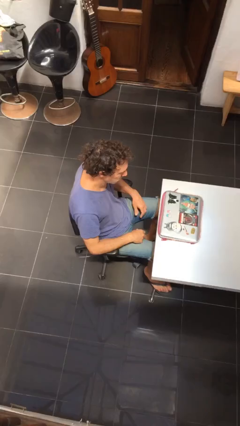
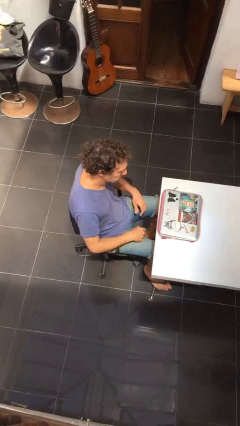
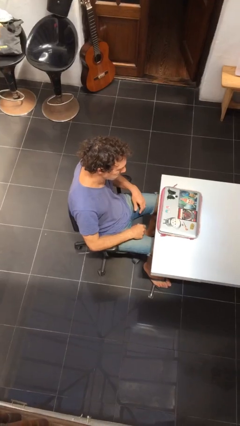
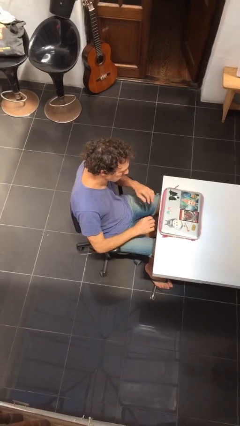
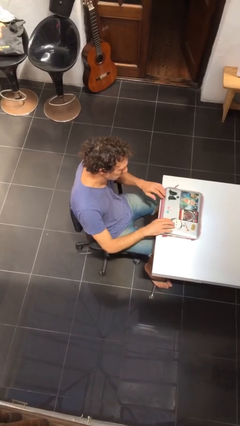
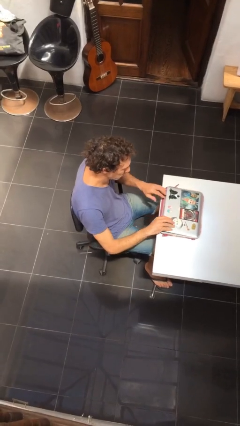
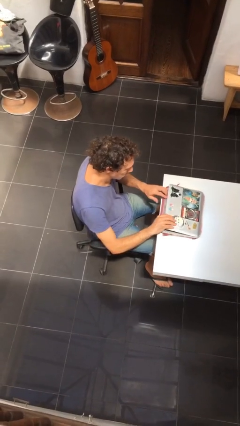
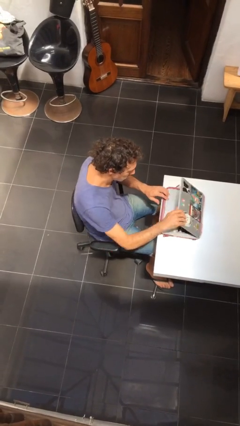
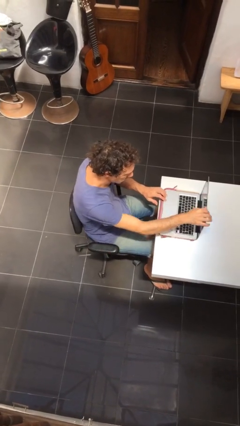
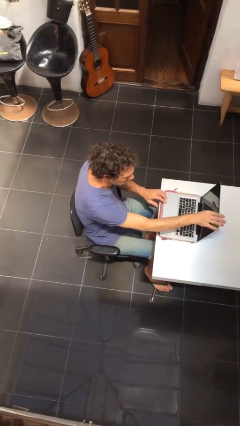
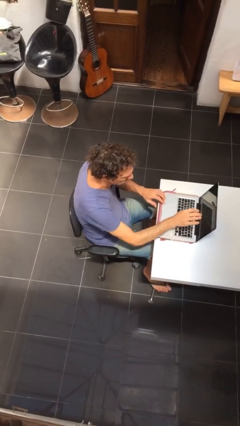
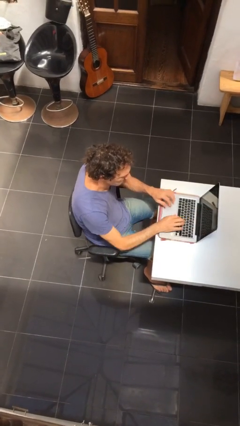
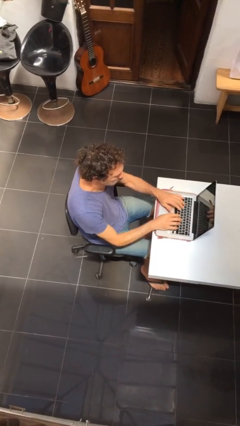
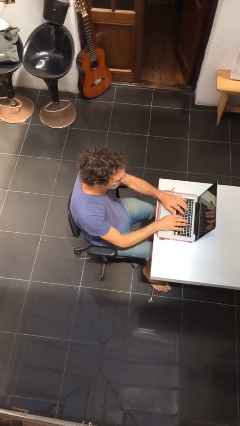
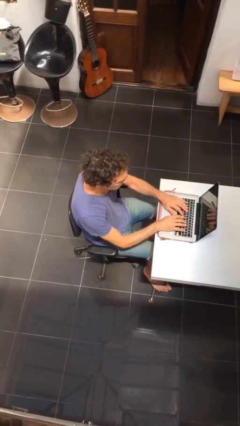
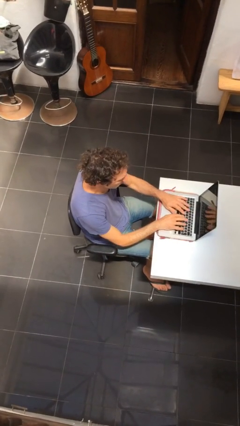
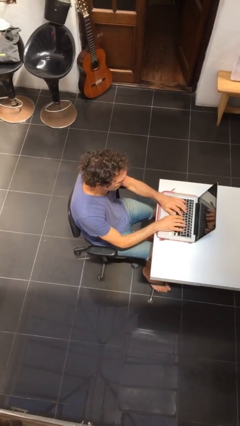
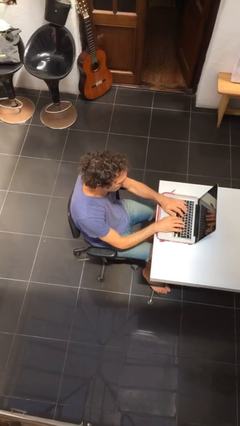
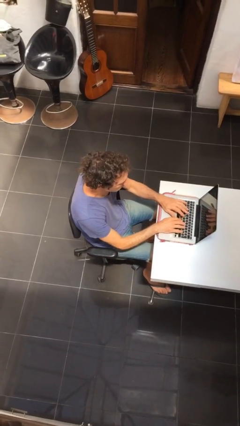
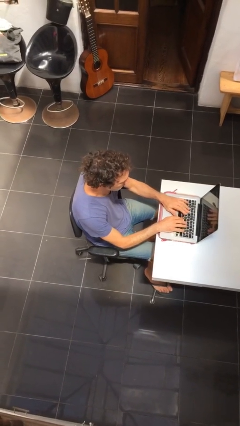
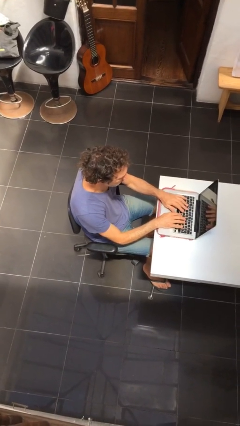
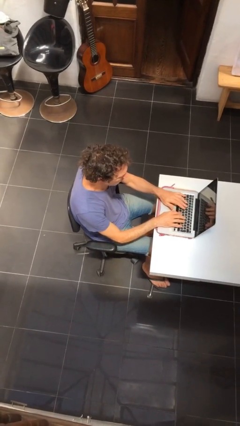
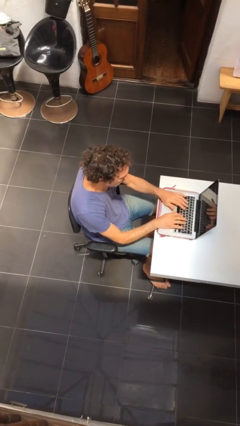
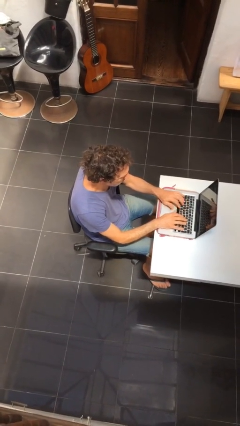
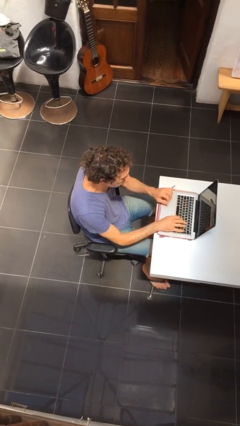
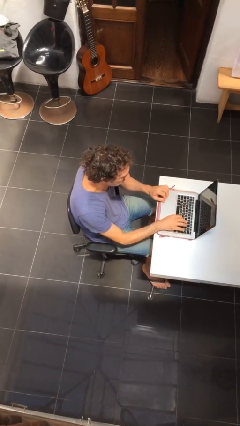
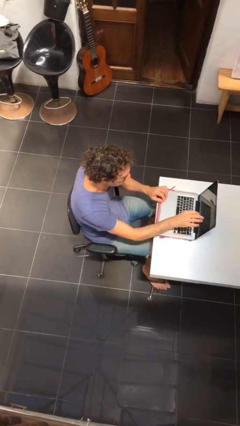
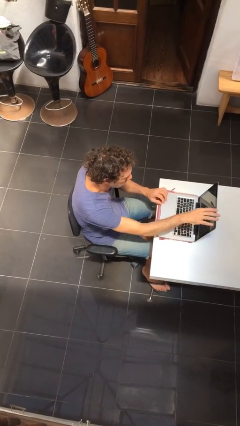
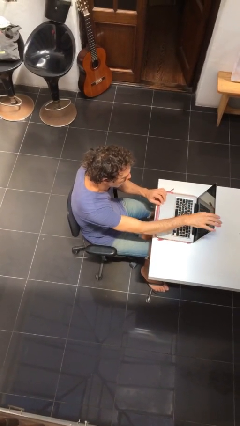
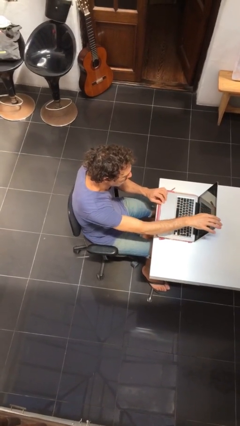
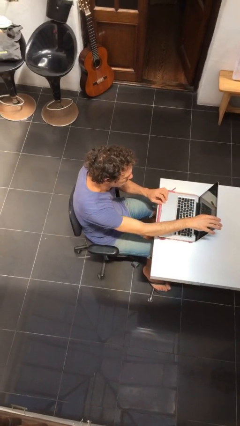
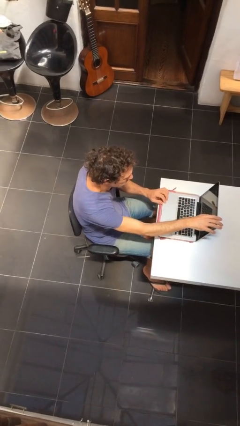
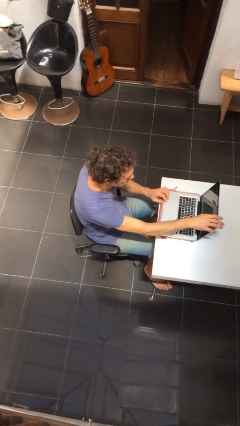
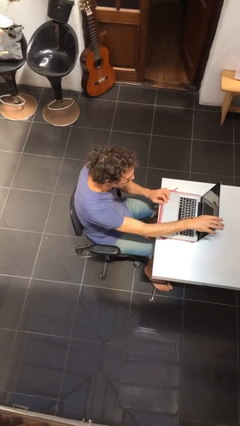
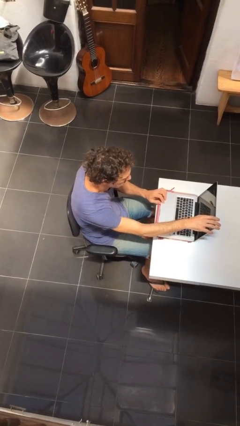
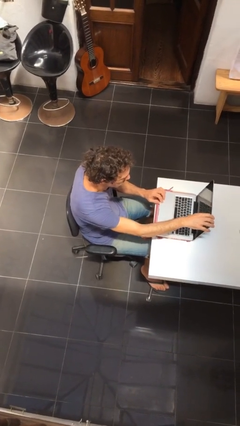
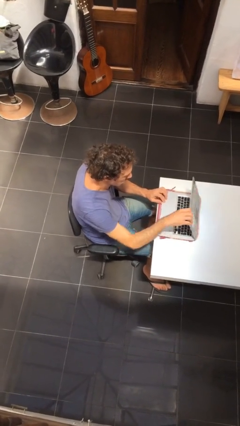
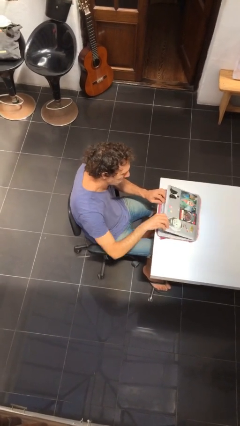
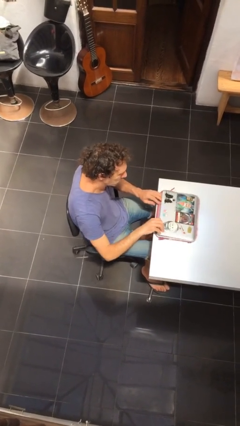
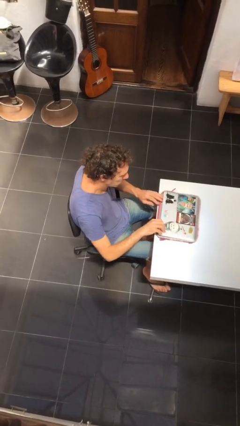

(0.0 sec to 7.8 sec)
person interacts with laptop

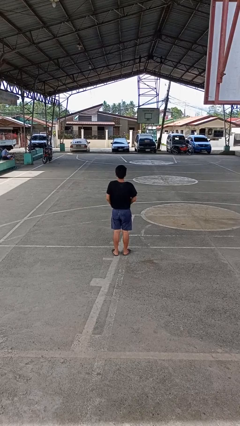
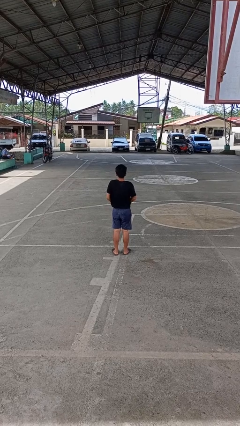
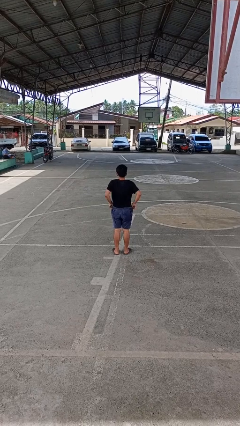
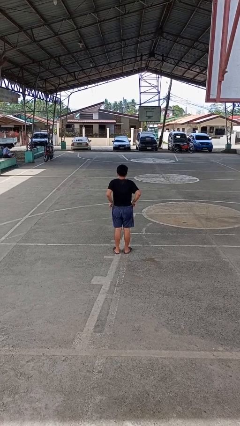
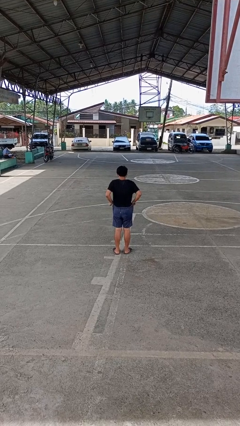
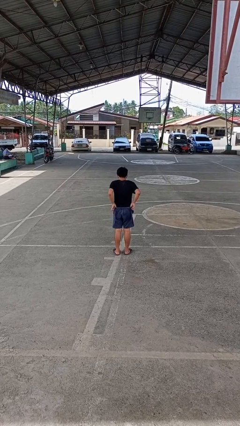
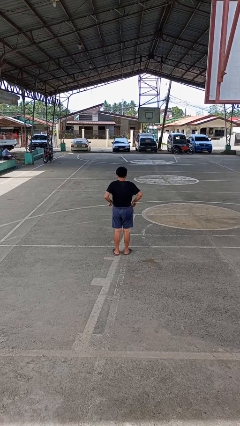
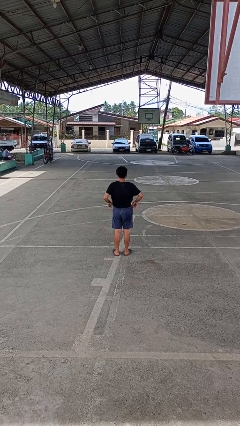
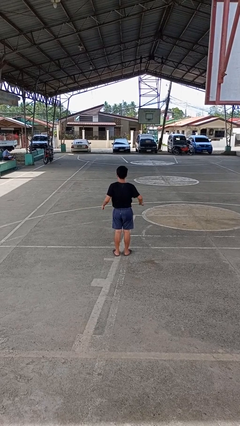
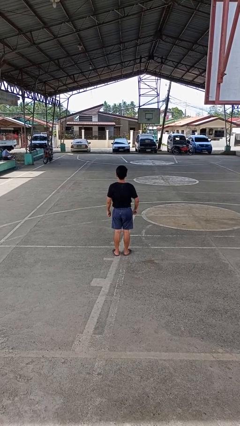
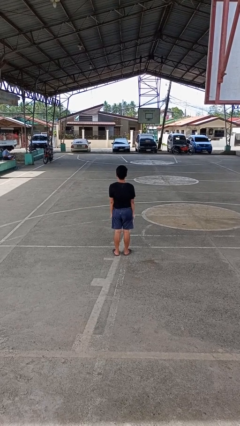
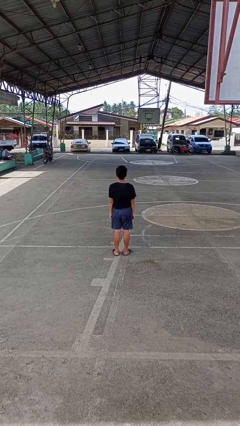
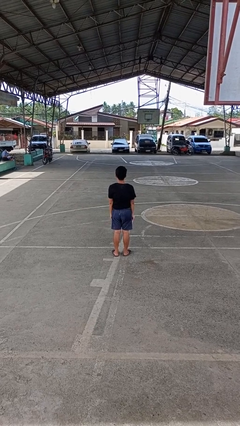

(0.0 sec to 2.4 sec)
person hikes up pants

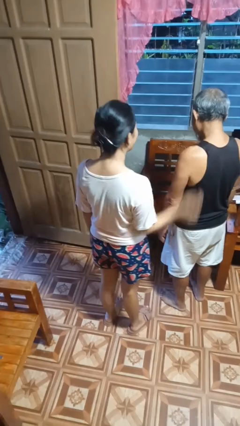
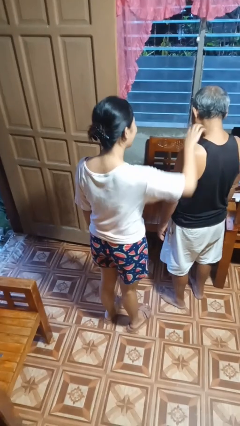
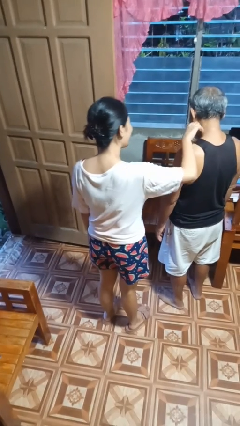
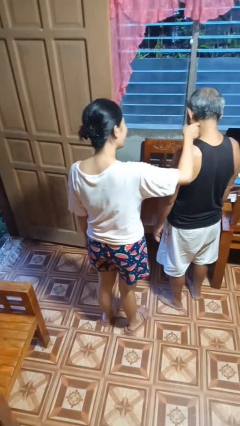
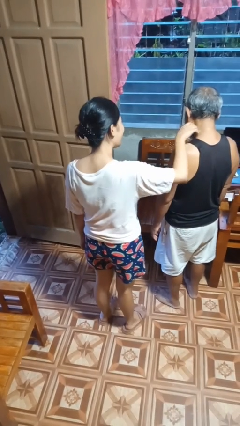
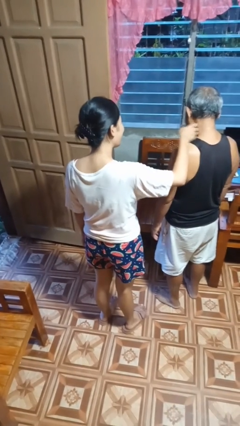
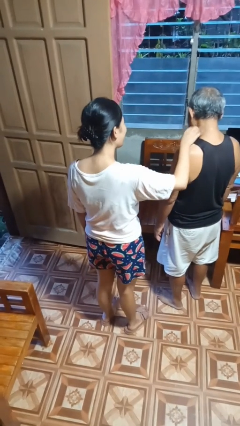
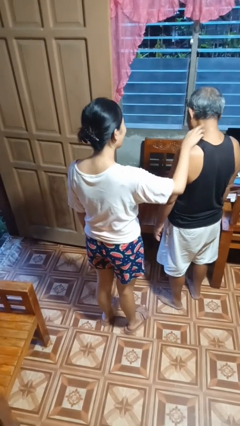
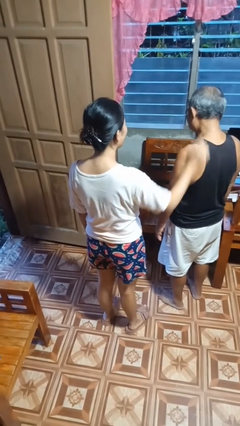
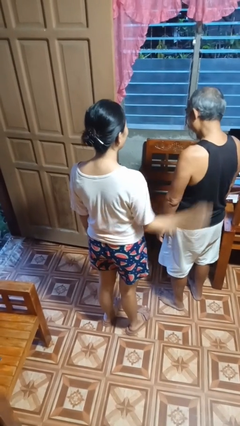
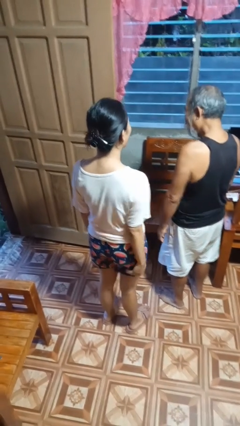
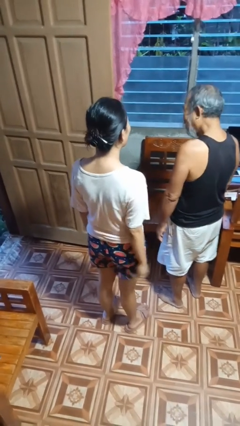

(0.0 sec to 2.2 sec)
person tickles person

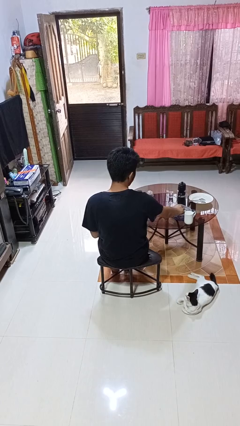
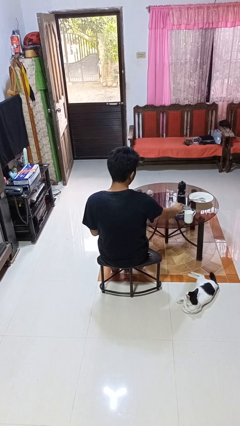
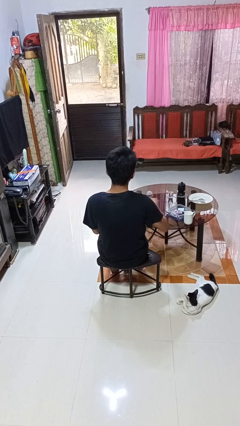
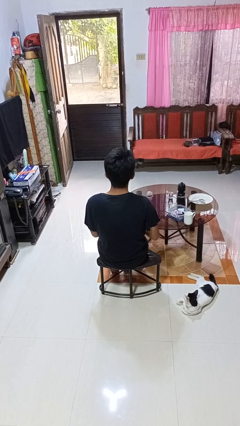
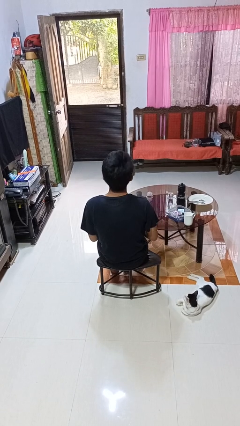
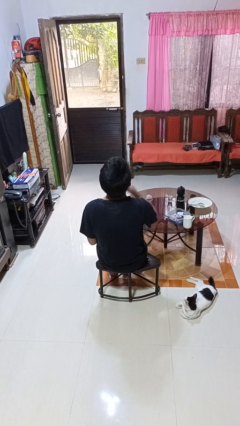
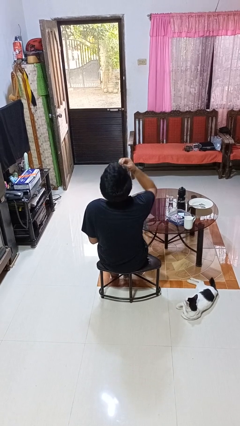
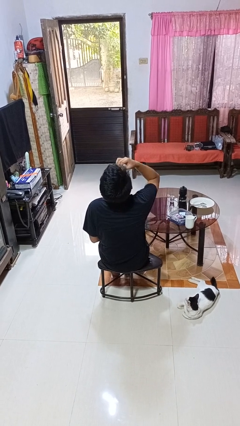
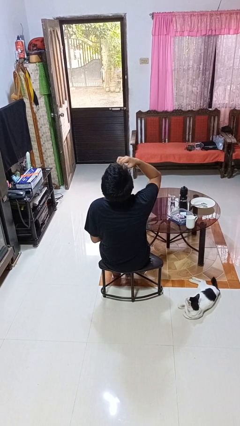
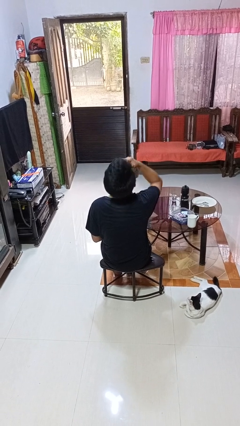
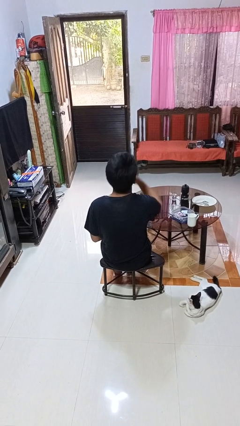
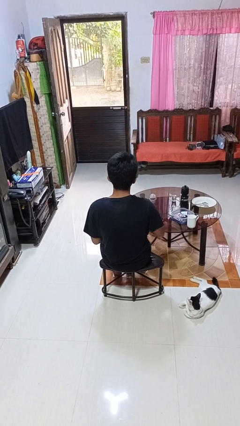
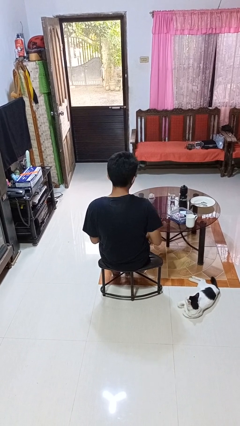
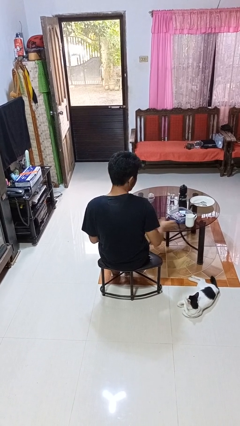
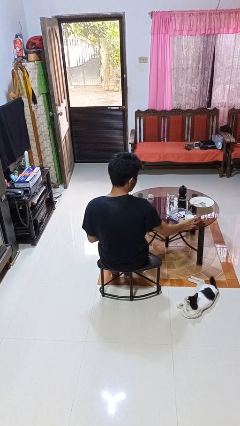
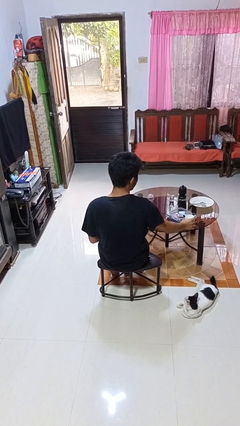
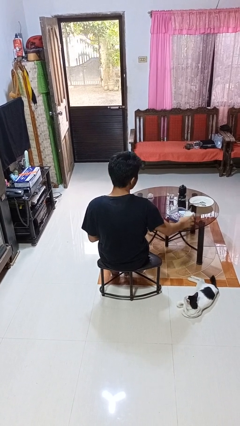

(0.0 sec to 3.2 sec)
person takes medicine pills

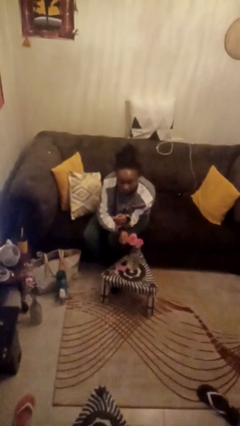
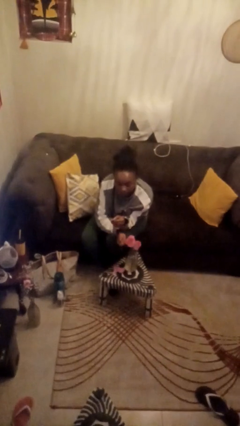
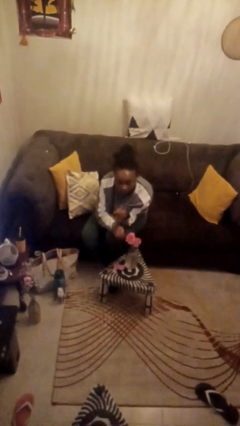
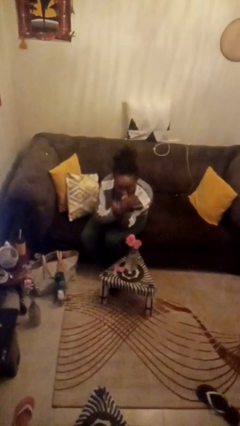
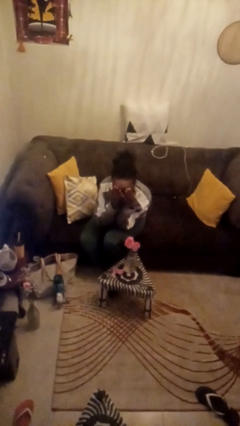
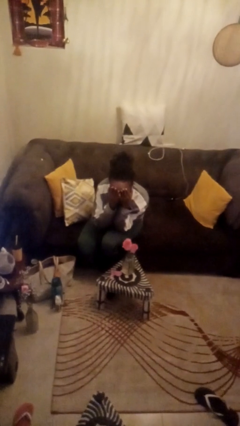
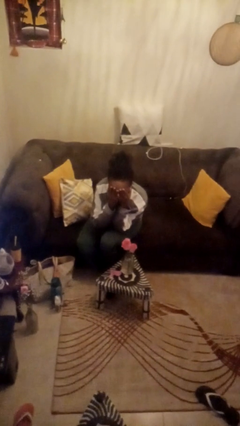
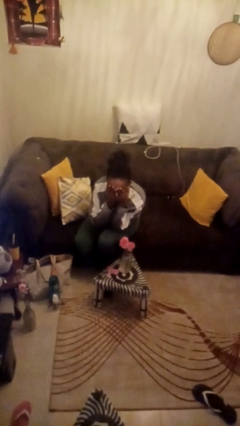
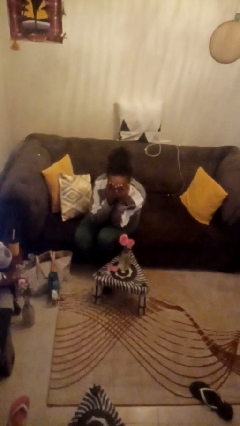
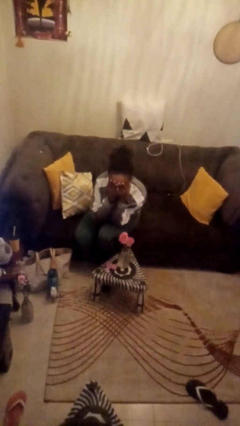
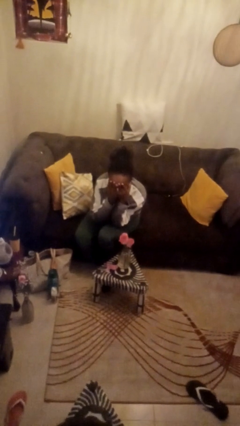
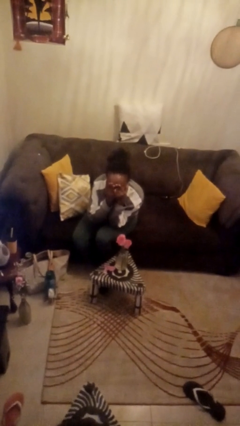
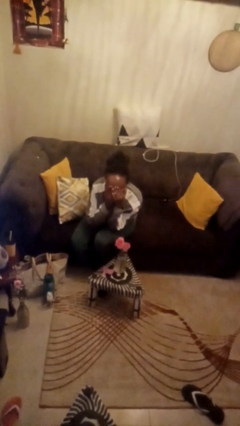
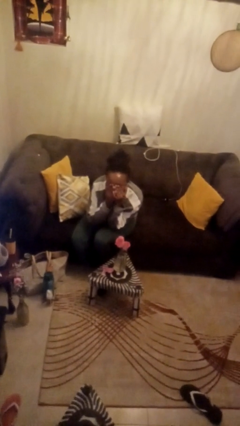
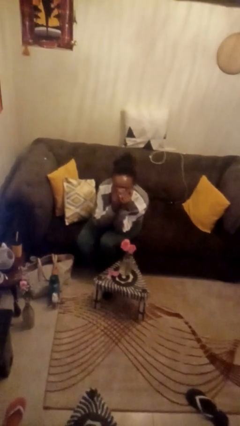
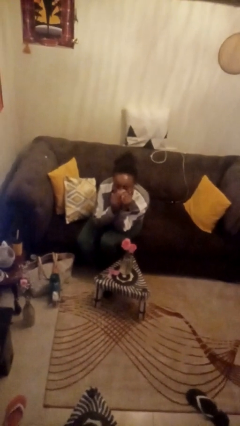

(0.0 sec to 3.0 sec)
person covers face with hands
